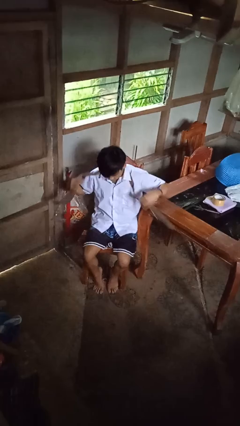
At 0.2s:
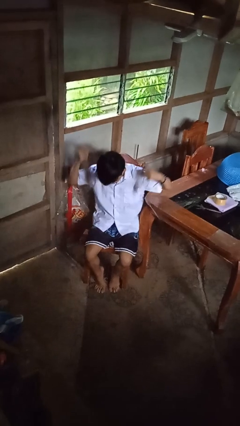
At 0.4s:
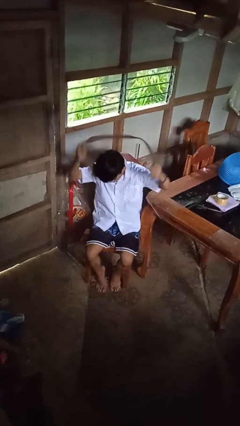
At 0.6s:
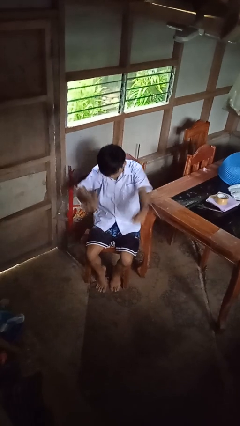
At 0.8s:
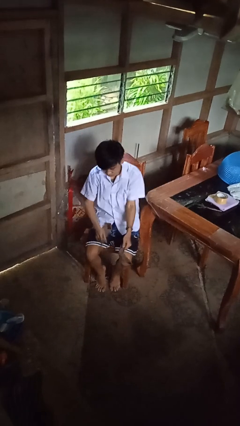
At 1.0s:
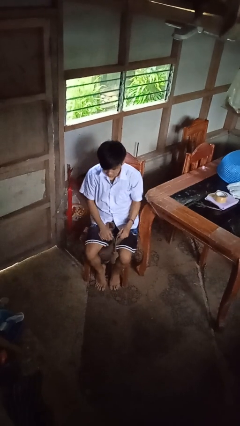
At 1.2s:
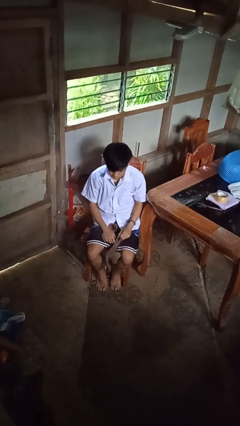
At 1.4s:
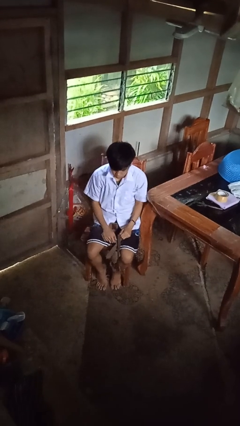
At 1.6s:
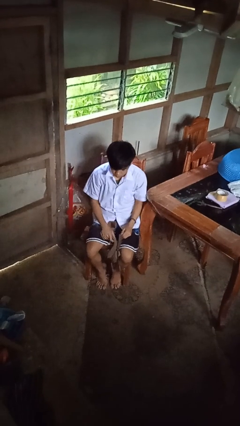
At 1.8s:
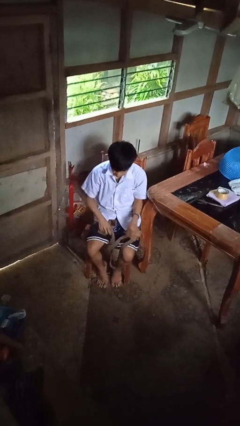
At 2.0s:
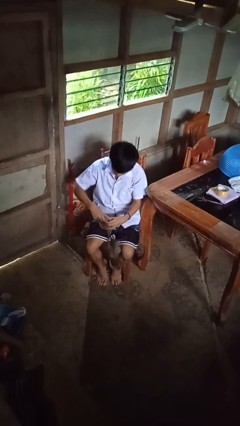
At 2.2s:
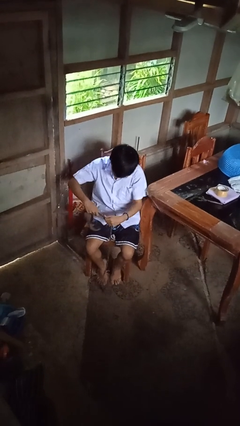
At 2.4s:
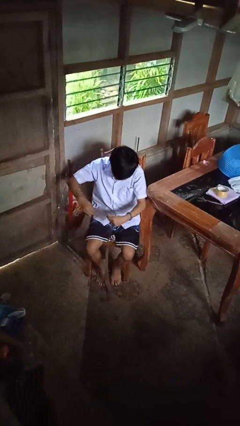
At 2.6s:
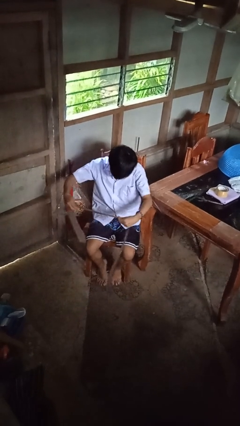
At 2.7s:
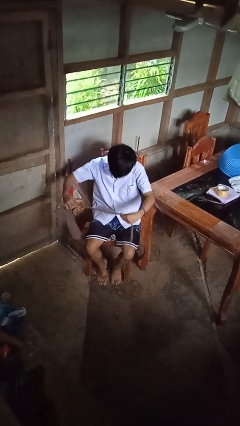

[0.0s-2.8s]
person takes off necktie

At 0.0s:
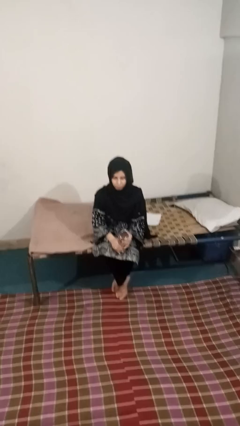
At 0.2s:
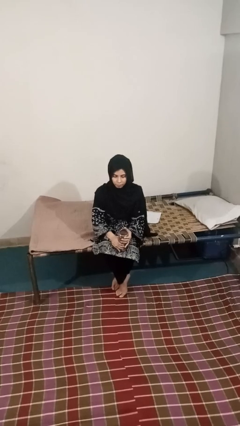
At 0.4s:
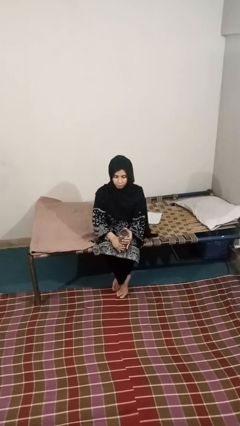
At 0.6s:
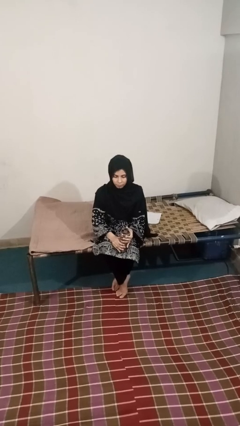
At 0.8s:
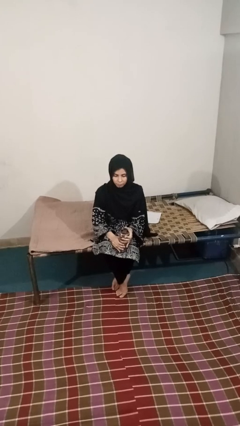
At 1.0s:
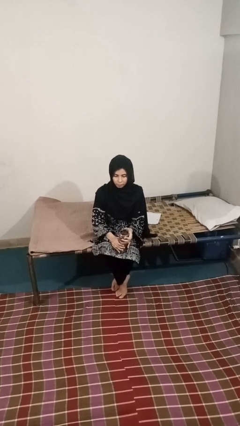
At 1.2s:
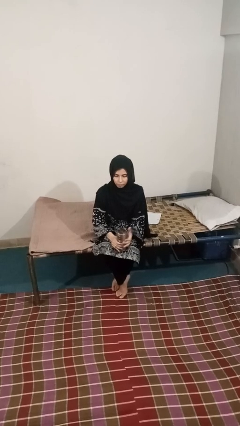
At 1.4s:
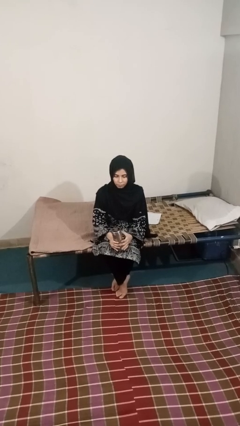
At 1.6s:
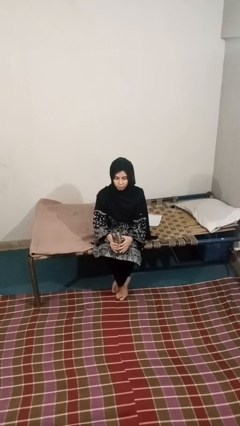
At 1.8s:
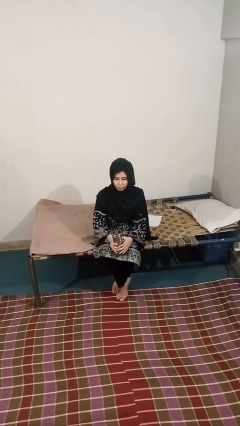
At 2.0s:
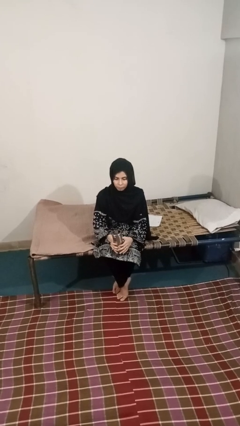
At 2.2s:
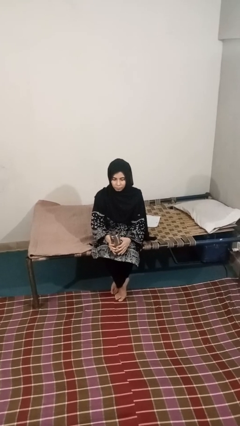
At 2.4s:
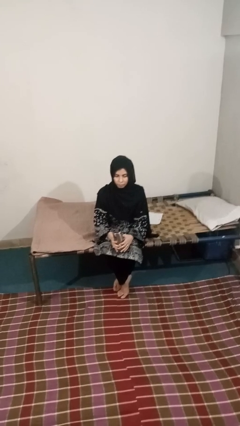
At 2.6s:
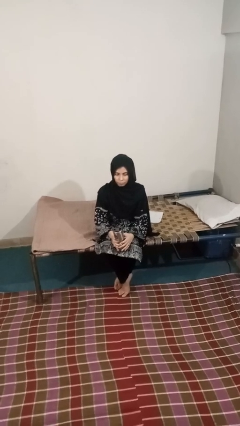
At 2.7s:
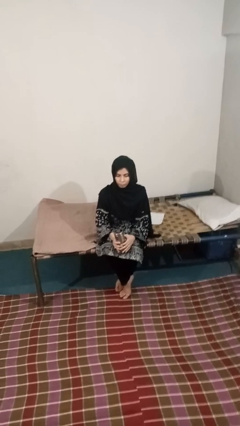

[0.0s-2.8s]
person opens beverage can

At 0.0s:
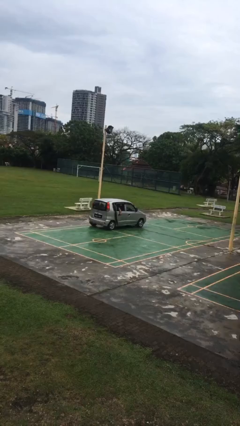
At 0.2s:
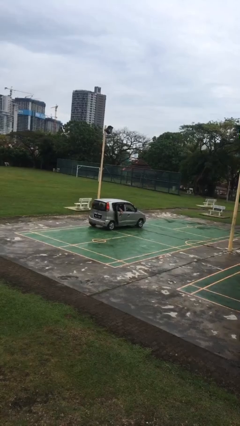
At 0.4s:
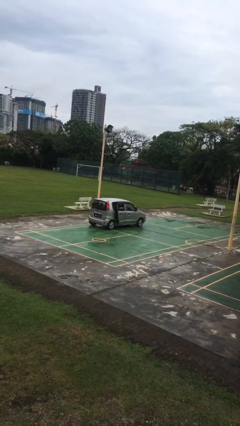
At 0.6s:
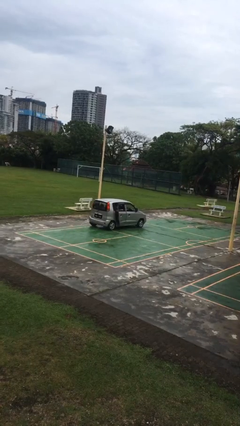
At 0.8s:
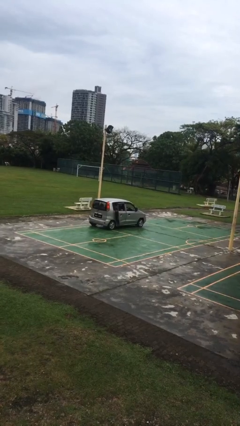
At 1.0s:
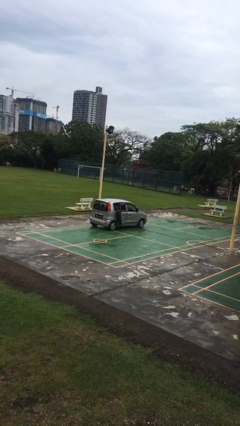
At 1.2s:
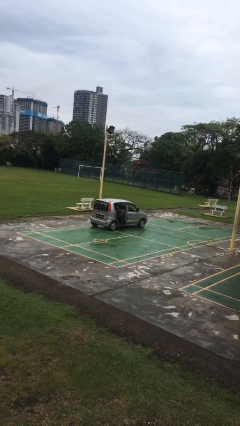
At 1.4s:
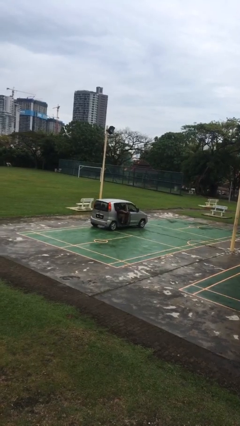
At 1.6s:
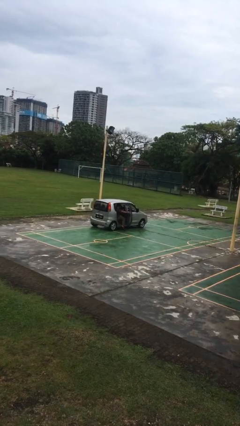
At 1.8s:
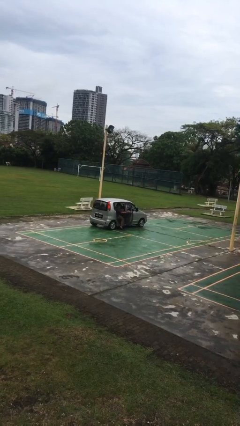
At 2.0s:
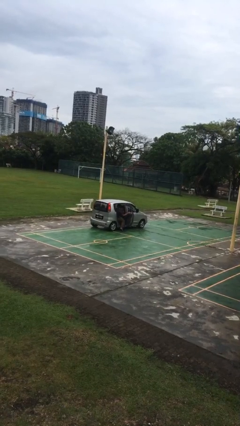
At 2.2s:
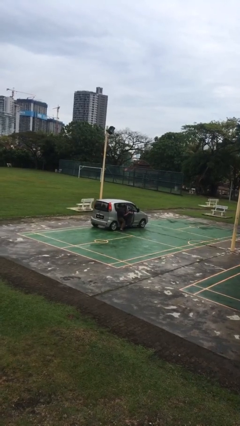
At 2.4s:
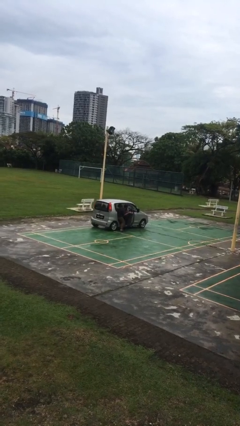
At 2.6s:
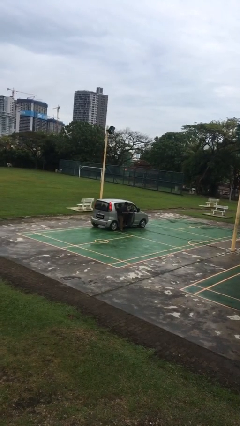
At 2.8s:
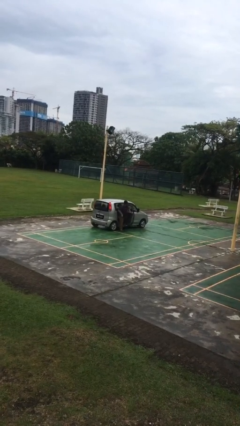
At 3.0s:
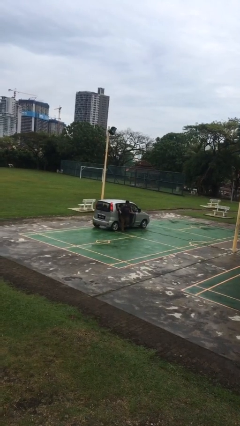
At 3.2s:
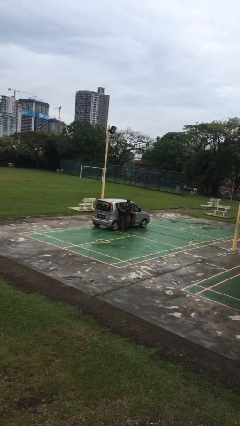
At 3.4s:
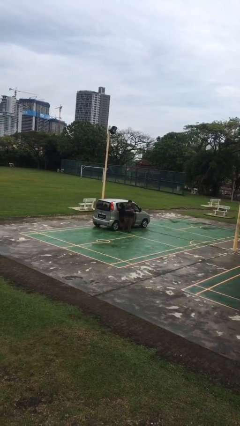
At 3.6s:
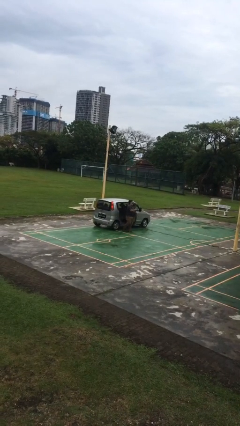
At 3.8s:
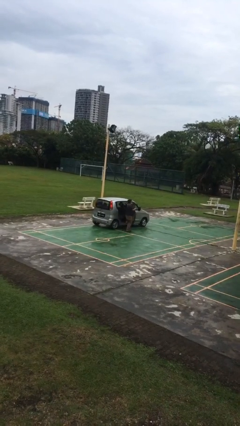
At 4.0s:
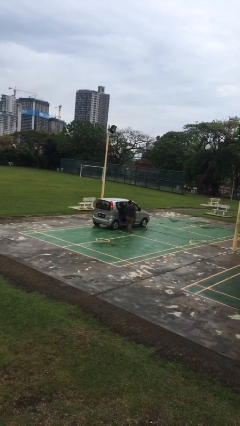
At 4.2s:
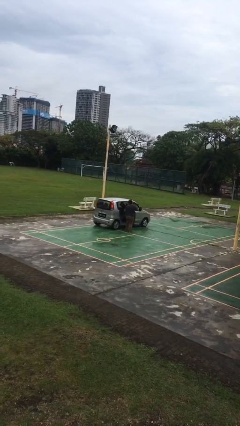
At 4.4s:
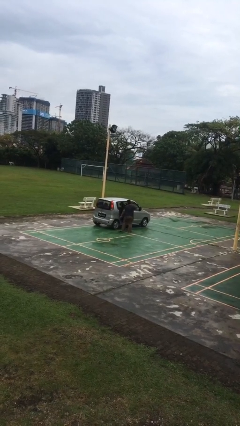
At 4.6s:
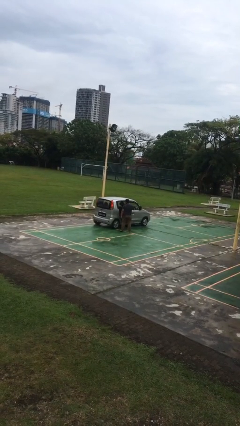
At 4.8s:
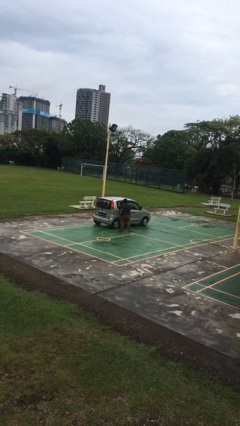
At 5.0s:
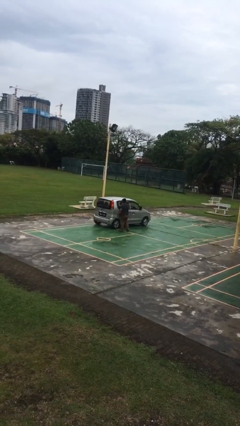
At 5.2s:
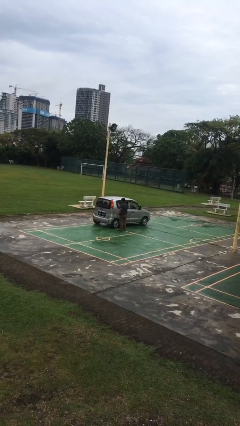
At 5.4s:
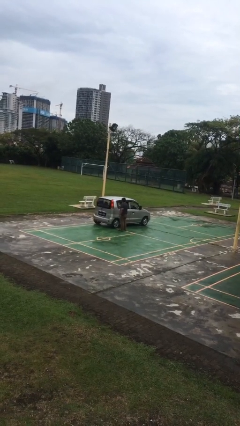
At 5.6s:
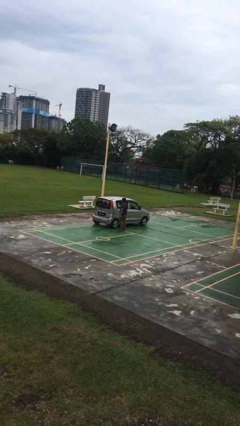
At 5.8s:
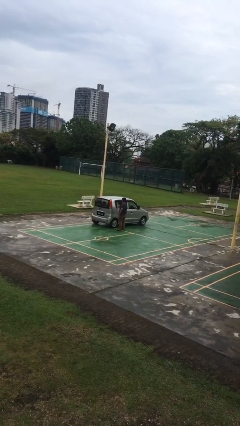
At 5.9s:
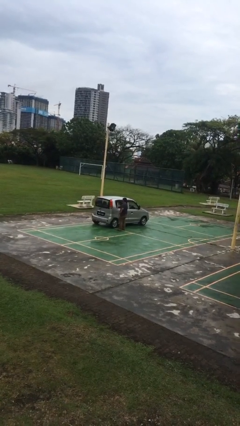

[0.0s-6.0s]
car drops off person

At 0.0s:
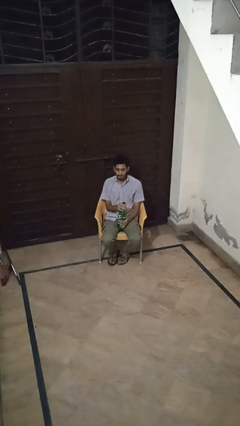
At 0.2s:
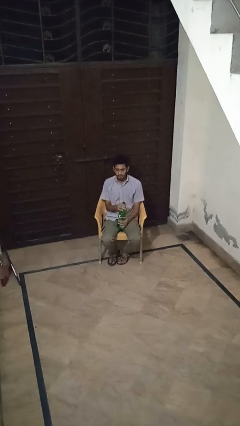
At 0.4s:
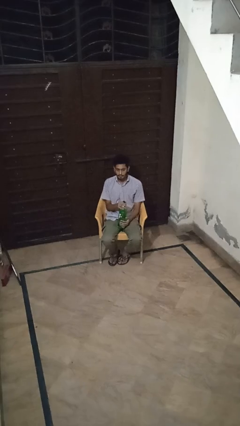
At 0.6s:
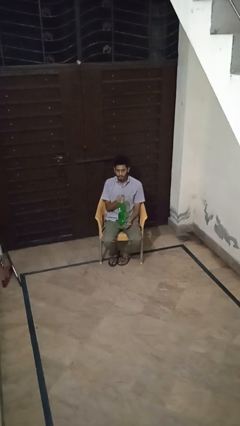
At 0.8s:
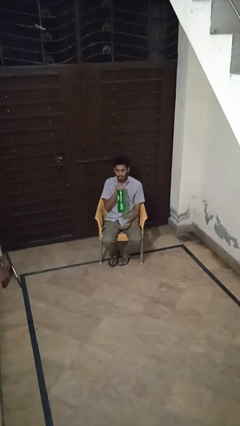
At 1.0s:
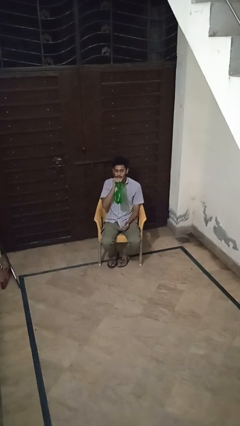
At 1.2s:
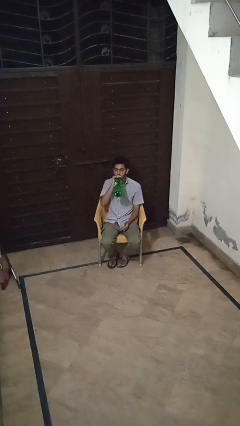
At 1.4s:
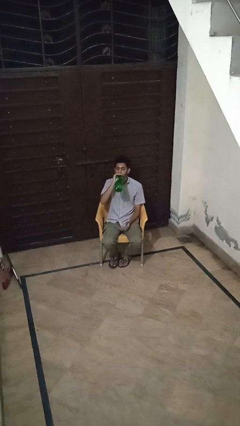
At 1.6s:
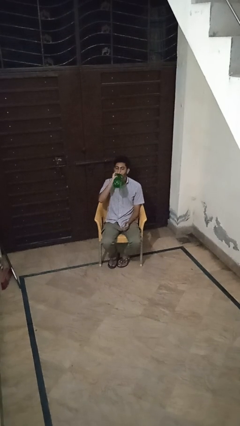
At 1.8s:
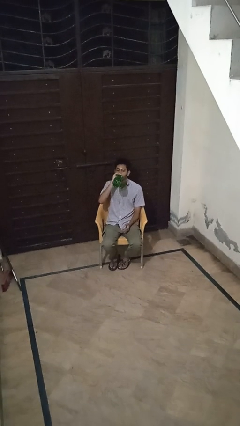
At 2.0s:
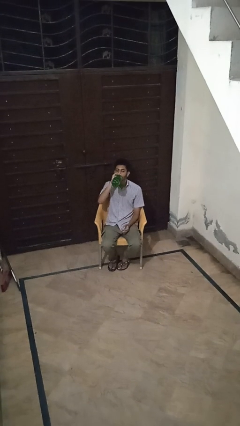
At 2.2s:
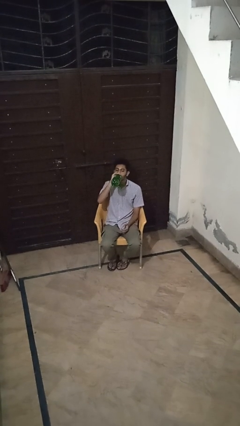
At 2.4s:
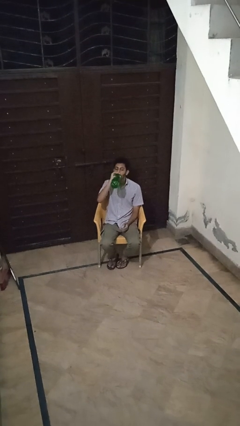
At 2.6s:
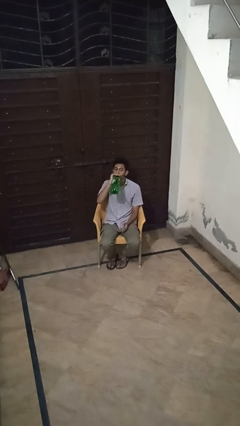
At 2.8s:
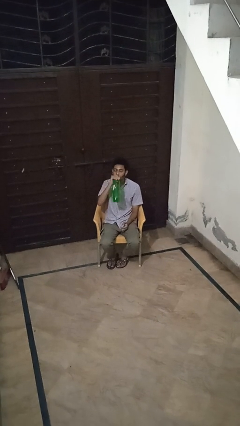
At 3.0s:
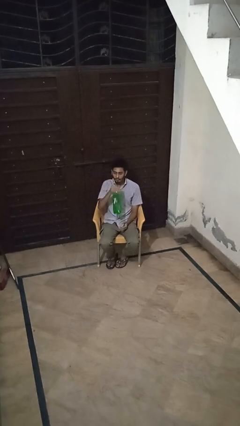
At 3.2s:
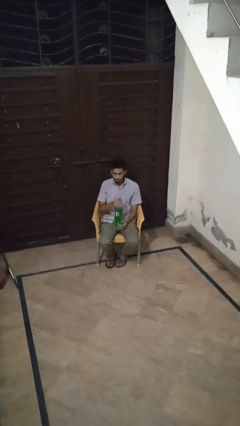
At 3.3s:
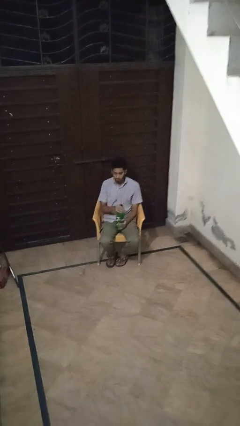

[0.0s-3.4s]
person drinks from bottle

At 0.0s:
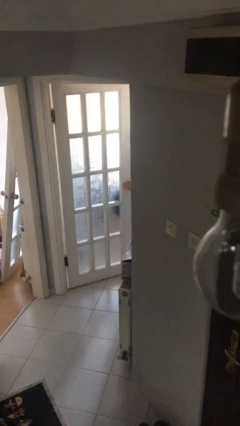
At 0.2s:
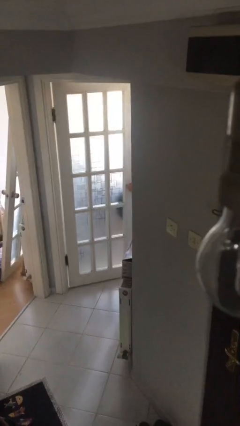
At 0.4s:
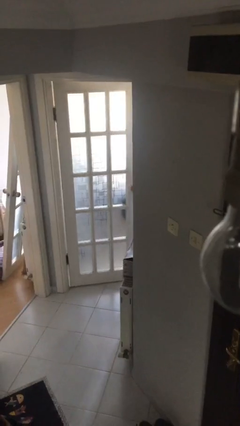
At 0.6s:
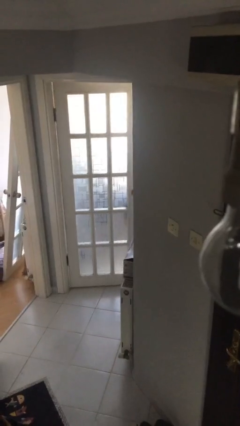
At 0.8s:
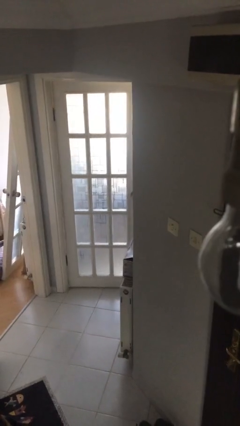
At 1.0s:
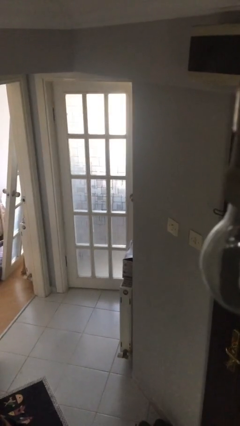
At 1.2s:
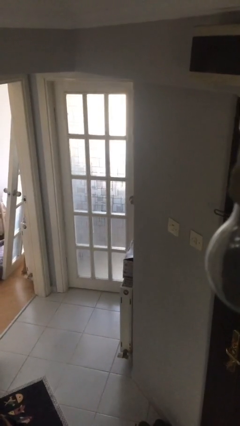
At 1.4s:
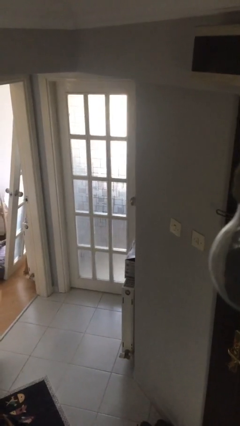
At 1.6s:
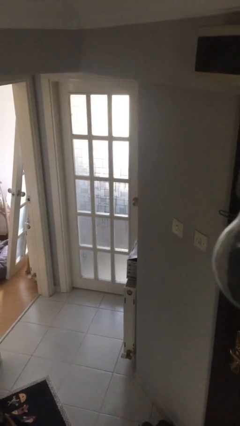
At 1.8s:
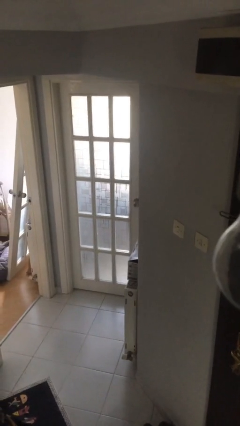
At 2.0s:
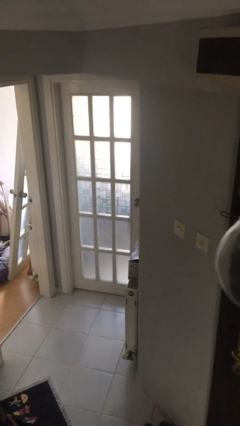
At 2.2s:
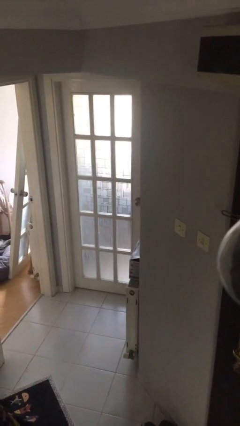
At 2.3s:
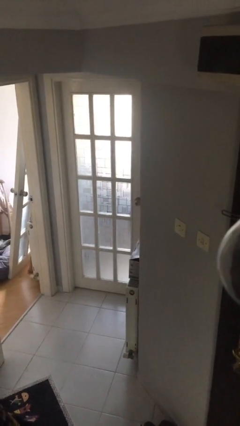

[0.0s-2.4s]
person closes facility door

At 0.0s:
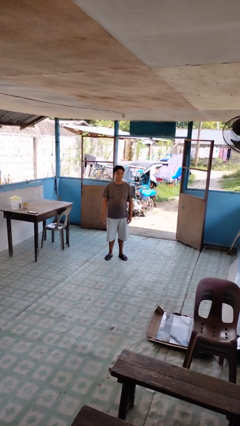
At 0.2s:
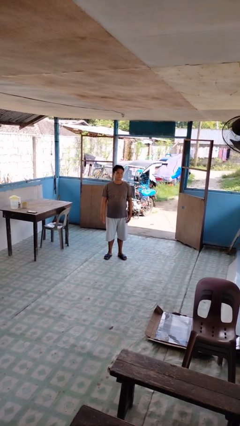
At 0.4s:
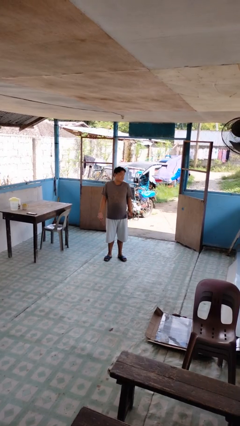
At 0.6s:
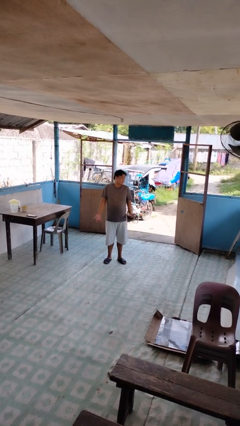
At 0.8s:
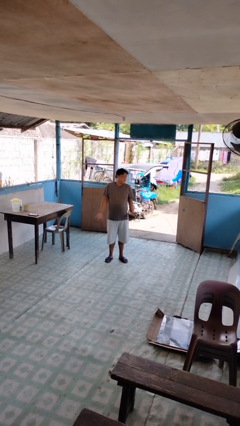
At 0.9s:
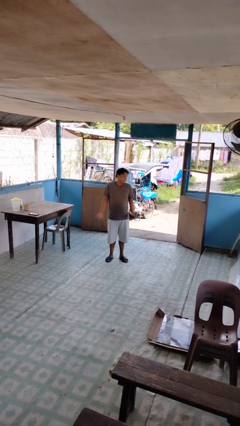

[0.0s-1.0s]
person shrugs
